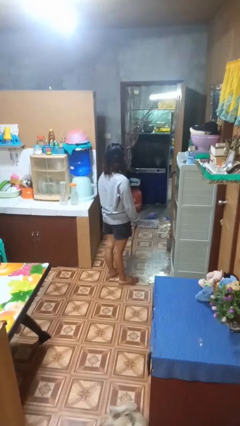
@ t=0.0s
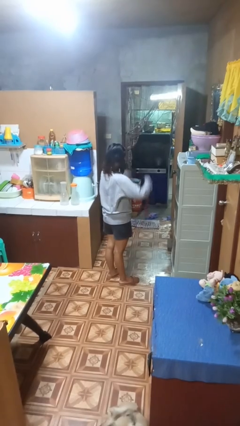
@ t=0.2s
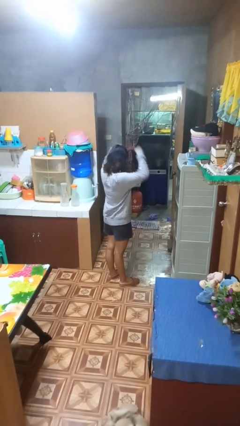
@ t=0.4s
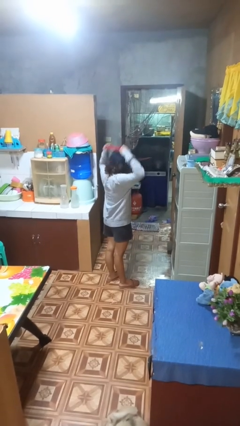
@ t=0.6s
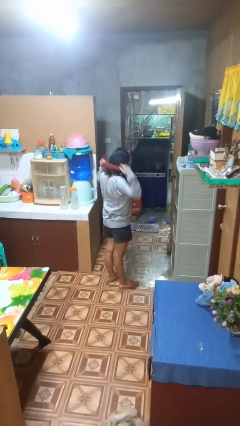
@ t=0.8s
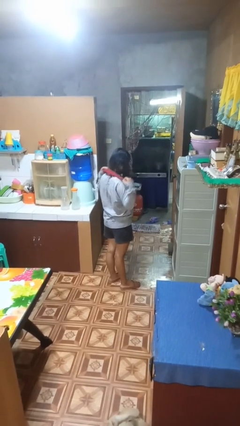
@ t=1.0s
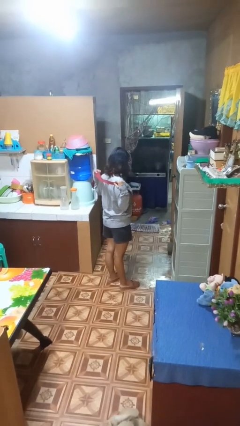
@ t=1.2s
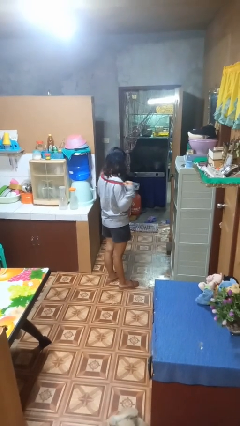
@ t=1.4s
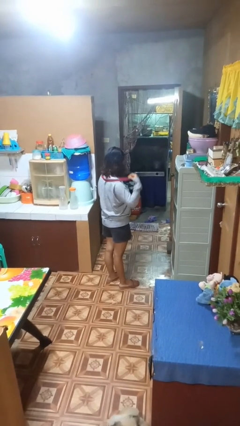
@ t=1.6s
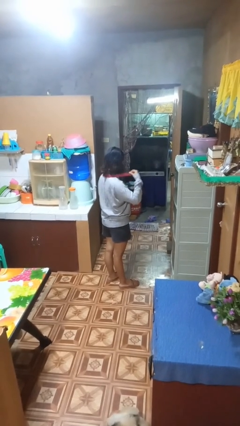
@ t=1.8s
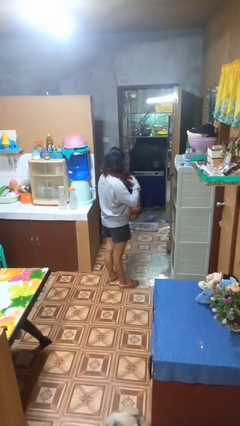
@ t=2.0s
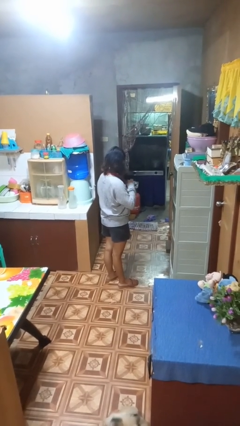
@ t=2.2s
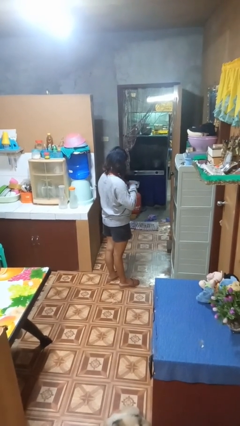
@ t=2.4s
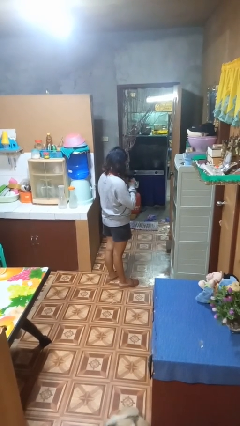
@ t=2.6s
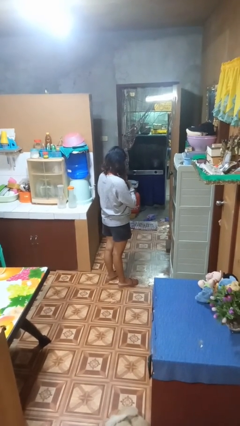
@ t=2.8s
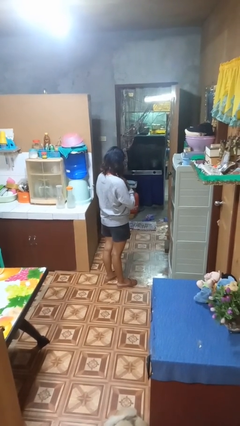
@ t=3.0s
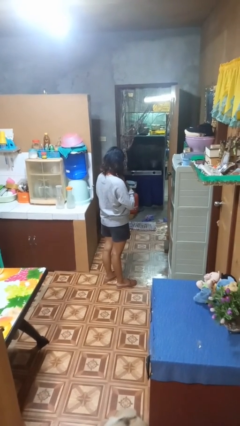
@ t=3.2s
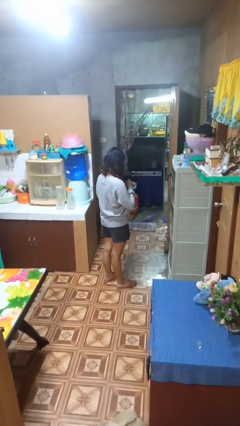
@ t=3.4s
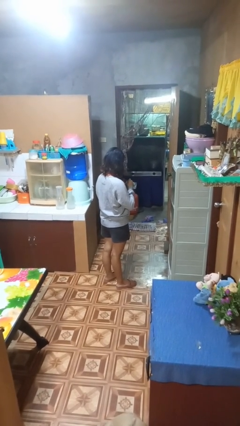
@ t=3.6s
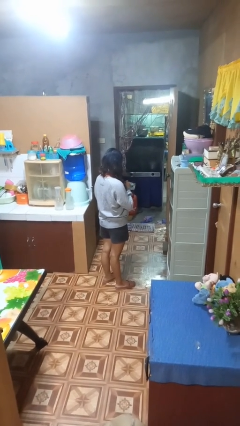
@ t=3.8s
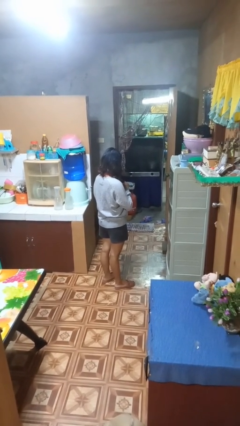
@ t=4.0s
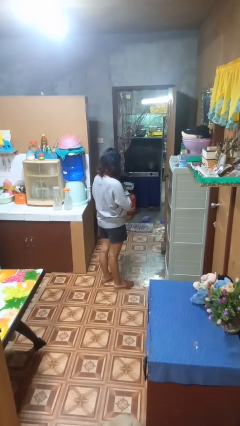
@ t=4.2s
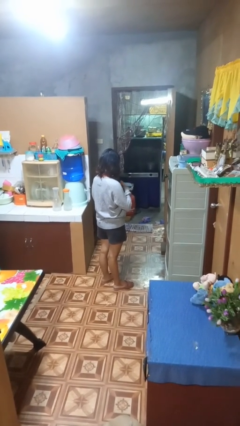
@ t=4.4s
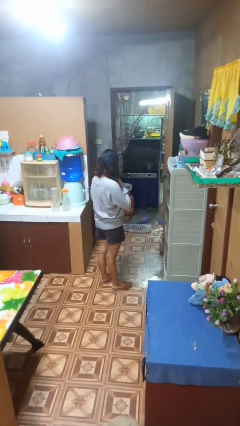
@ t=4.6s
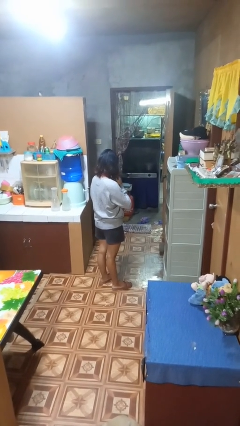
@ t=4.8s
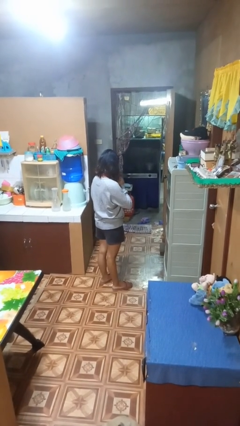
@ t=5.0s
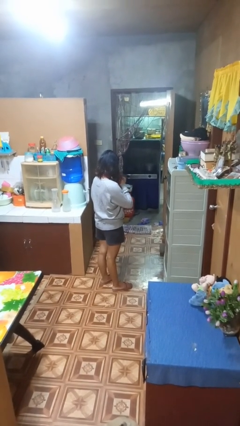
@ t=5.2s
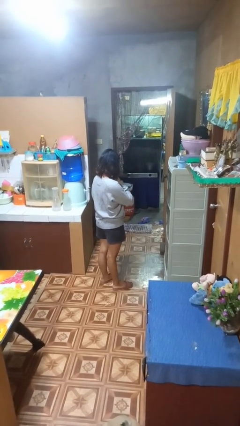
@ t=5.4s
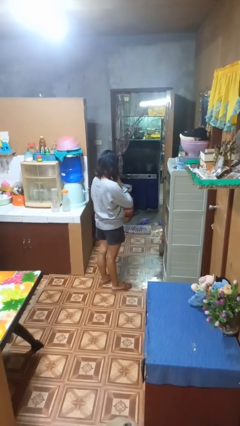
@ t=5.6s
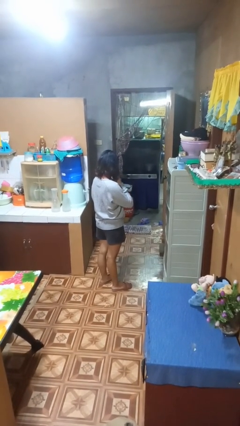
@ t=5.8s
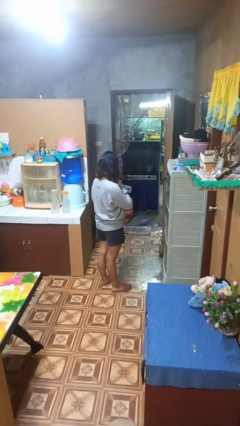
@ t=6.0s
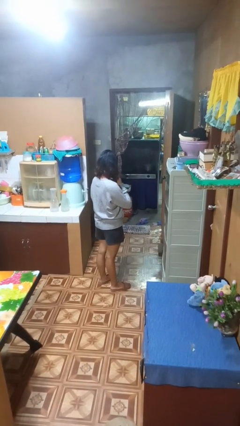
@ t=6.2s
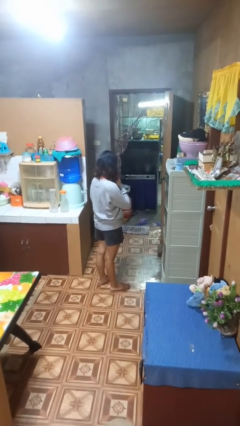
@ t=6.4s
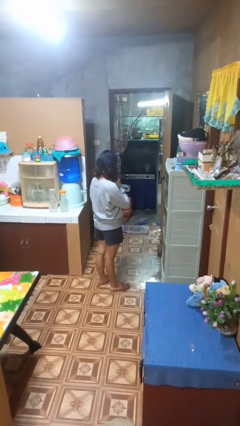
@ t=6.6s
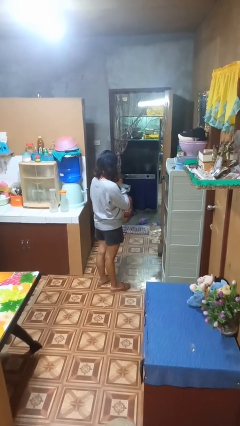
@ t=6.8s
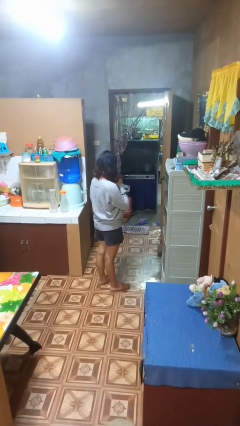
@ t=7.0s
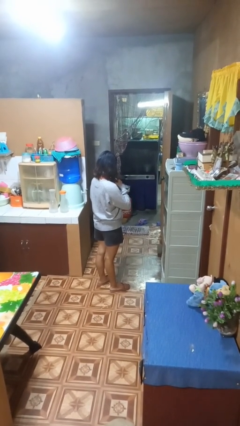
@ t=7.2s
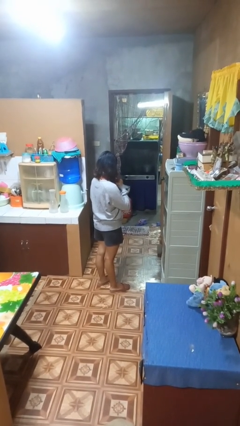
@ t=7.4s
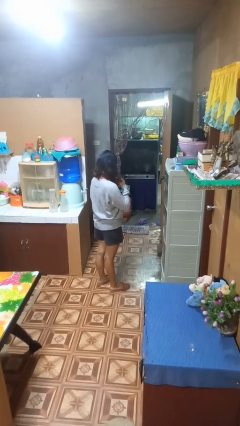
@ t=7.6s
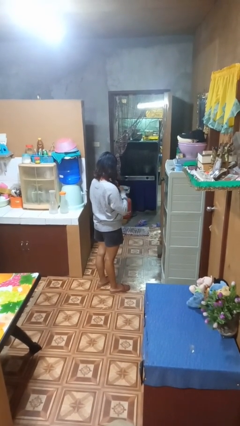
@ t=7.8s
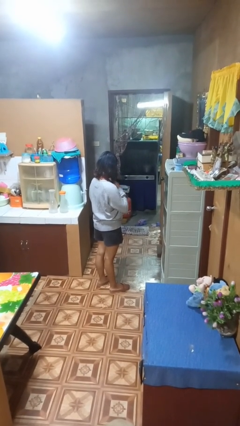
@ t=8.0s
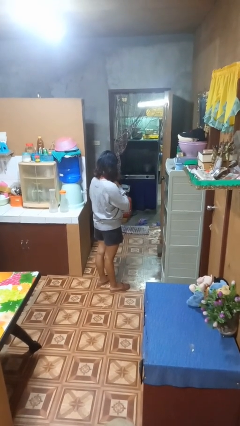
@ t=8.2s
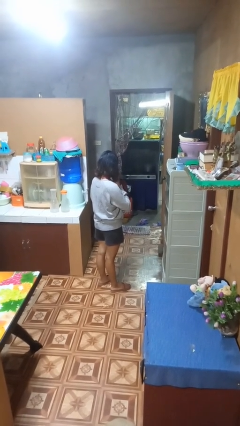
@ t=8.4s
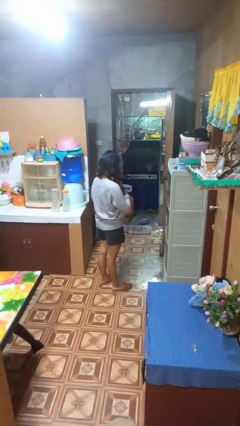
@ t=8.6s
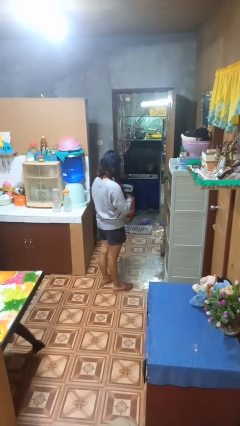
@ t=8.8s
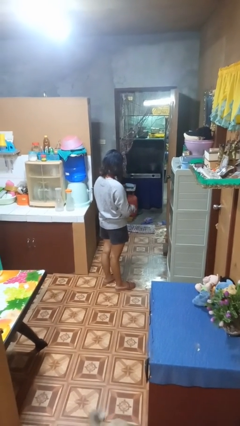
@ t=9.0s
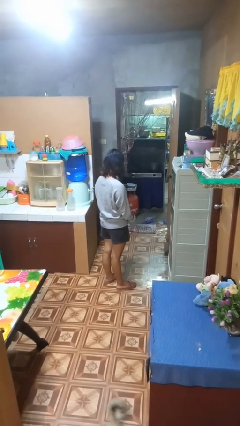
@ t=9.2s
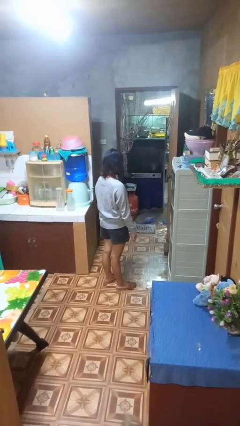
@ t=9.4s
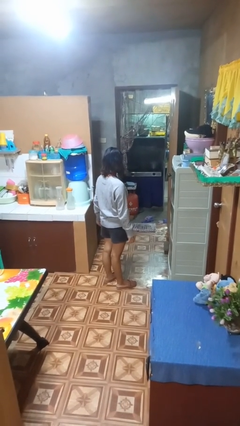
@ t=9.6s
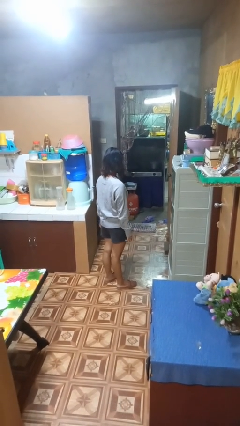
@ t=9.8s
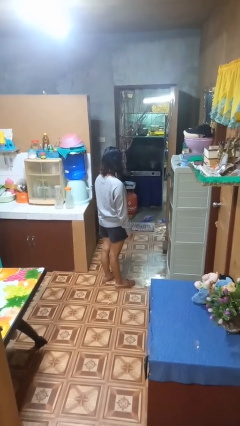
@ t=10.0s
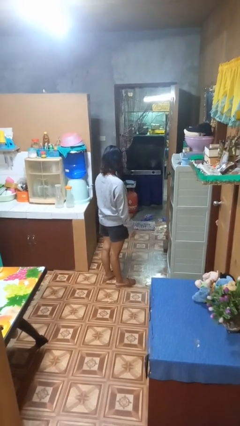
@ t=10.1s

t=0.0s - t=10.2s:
person puts on necktie

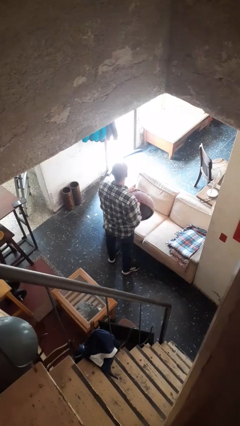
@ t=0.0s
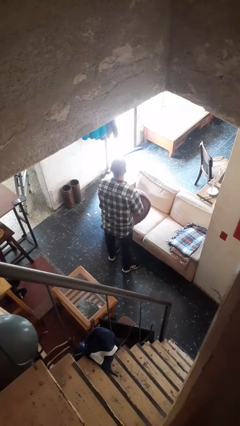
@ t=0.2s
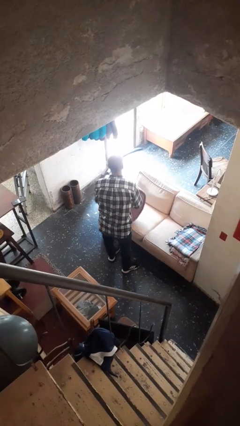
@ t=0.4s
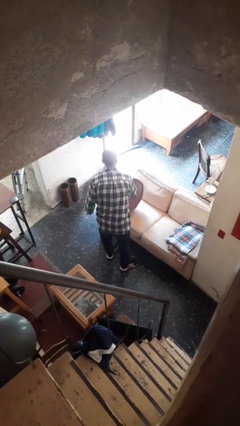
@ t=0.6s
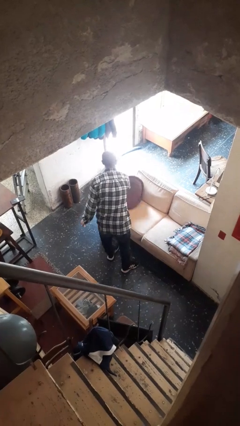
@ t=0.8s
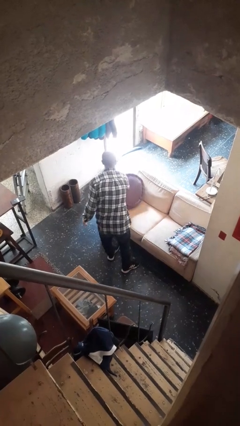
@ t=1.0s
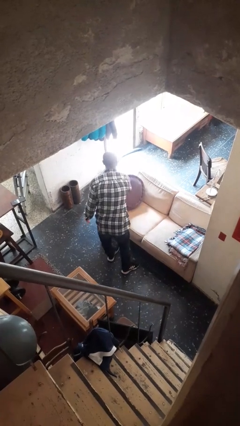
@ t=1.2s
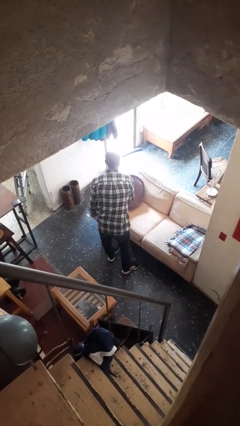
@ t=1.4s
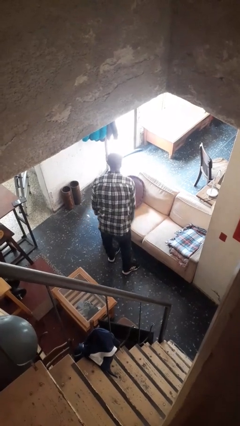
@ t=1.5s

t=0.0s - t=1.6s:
person puts down object on couch

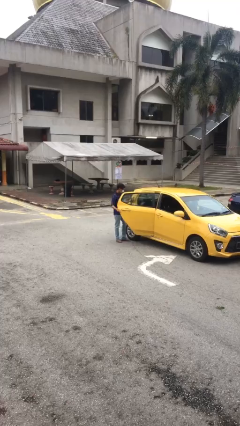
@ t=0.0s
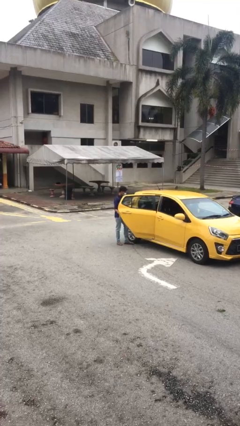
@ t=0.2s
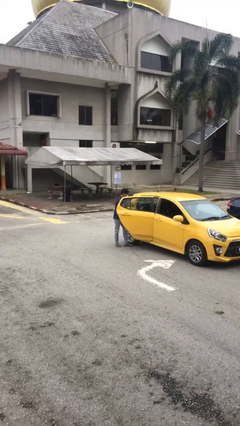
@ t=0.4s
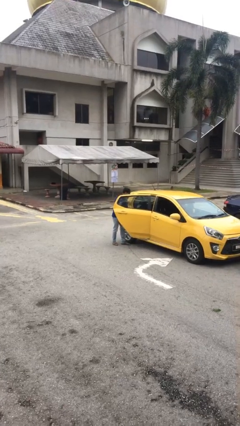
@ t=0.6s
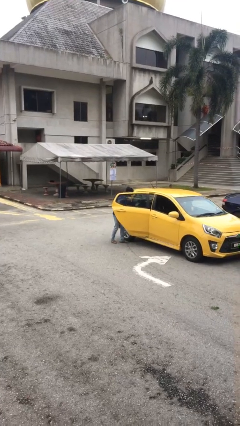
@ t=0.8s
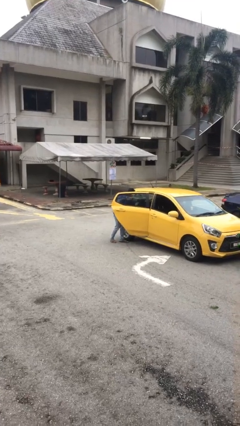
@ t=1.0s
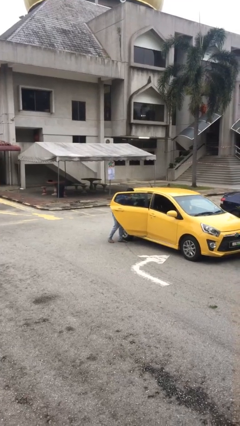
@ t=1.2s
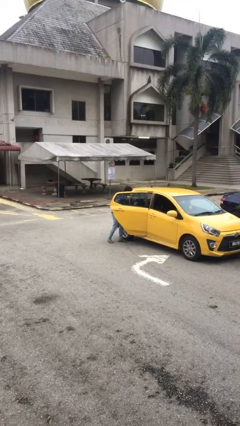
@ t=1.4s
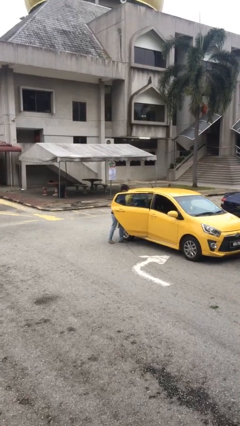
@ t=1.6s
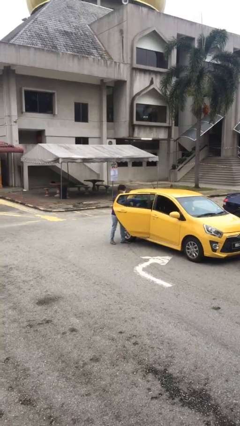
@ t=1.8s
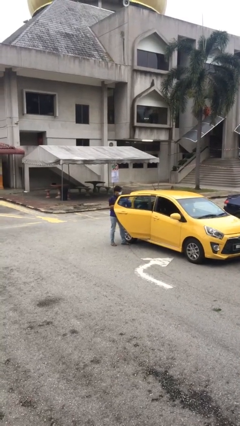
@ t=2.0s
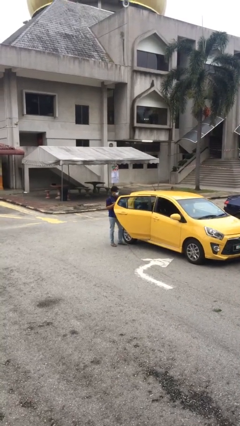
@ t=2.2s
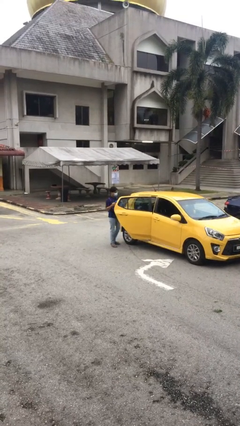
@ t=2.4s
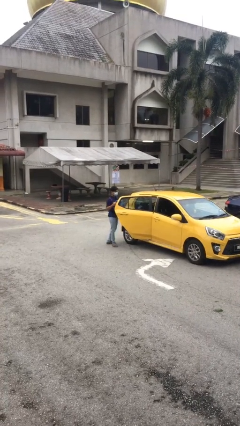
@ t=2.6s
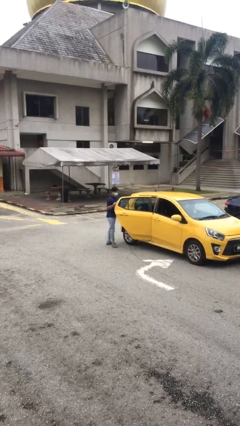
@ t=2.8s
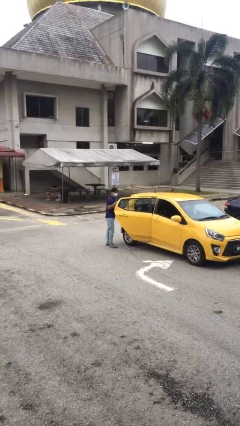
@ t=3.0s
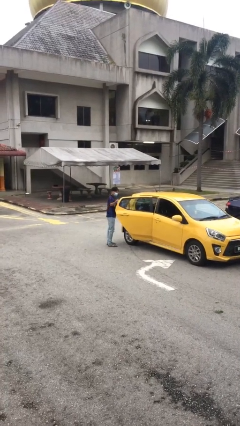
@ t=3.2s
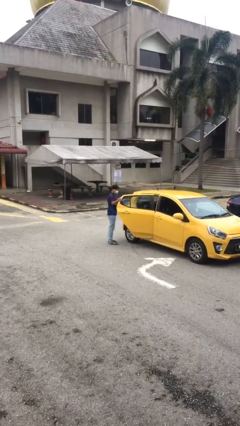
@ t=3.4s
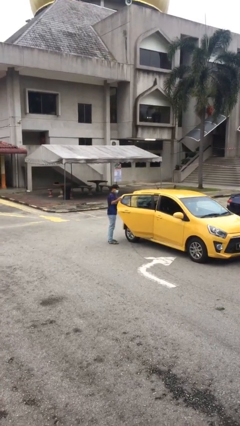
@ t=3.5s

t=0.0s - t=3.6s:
person unloads car

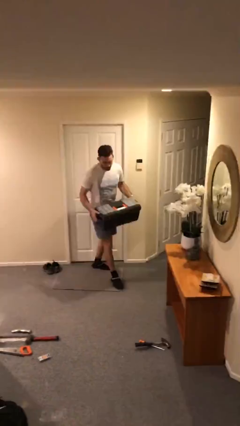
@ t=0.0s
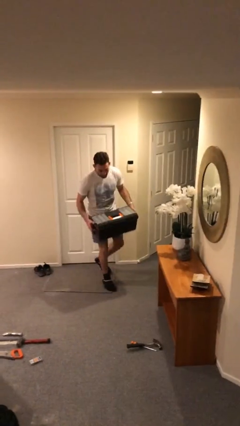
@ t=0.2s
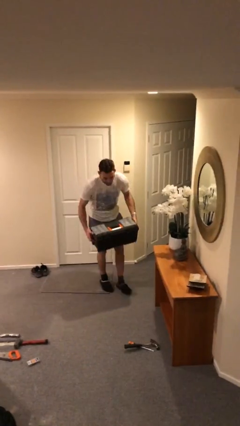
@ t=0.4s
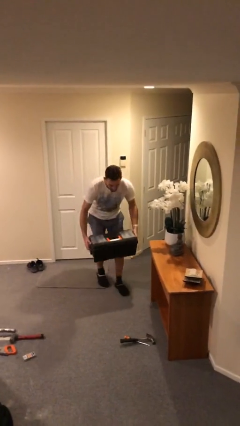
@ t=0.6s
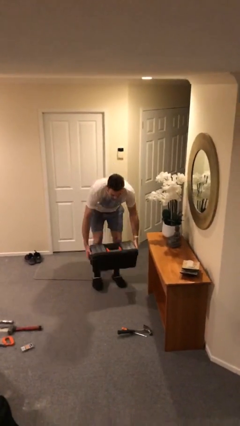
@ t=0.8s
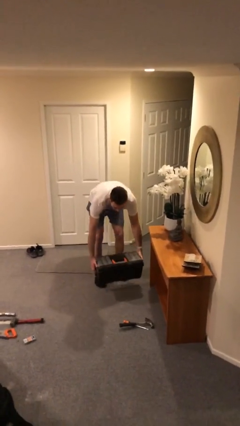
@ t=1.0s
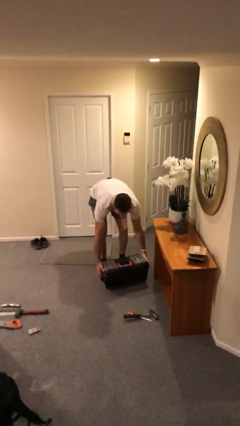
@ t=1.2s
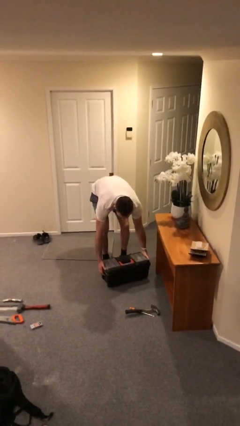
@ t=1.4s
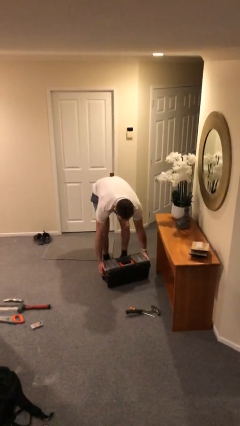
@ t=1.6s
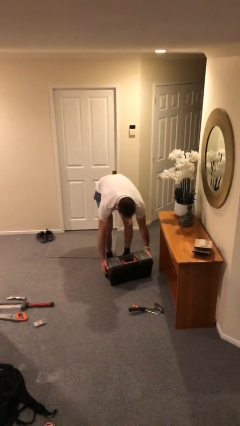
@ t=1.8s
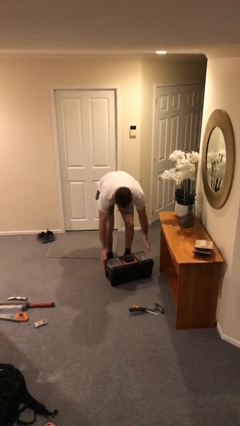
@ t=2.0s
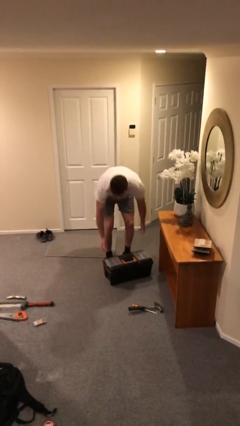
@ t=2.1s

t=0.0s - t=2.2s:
person puts down object on floor

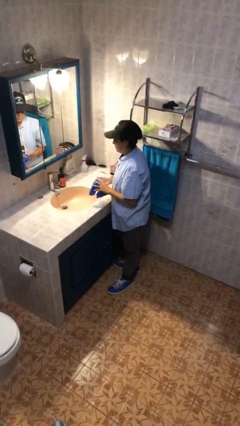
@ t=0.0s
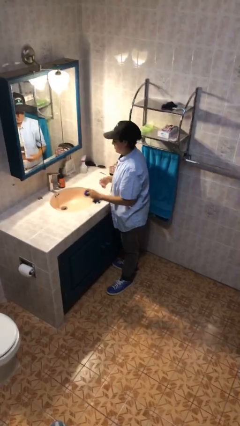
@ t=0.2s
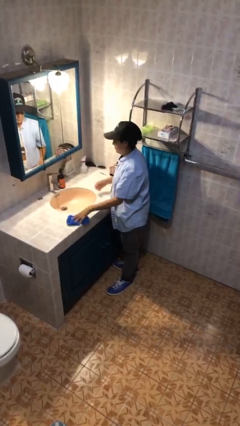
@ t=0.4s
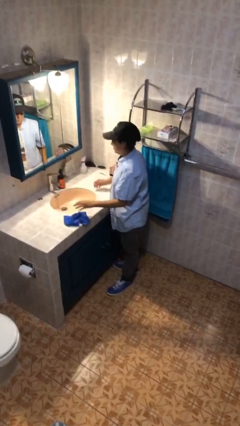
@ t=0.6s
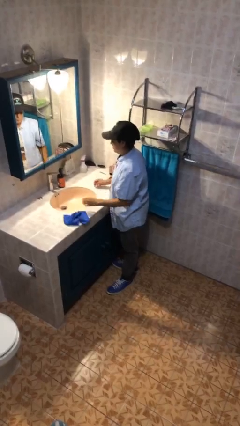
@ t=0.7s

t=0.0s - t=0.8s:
person dries hands with towel
